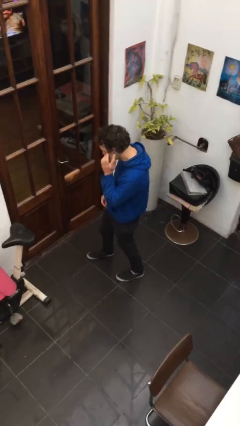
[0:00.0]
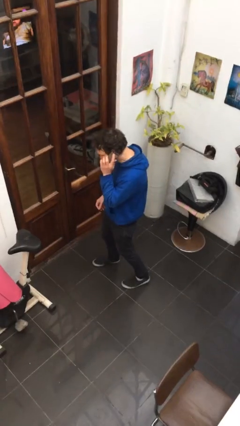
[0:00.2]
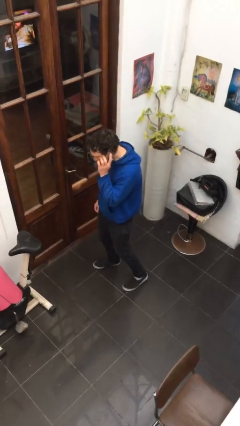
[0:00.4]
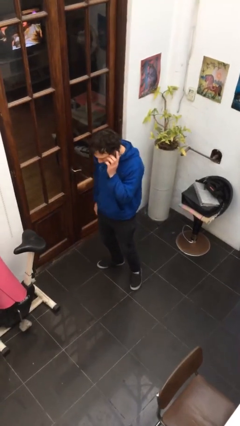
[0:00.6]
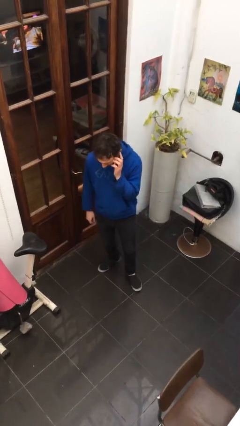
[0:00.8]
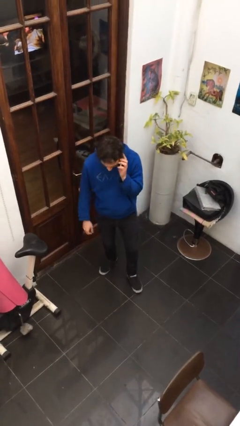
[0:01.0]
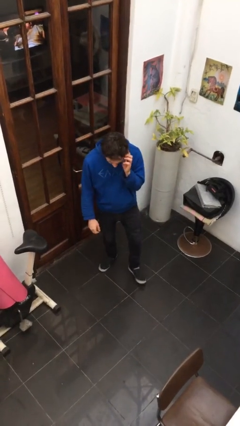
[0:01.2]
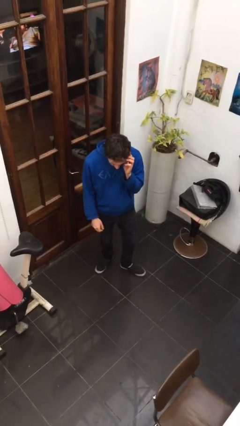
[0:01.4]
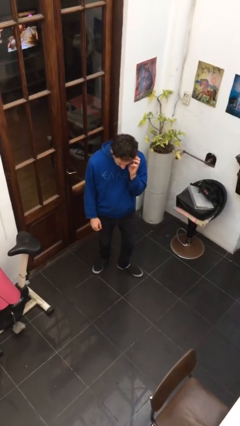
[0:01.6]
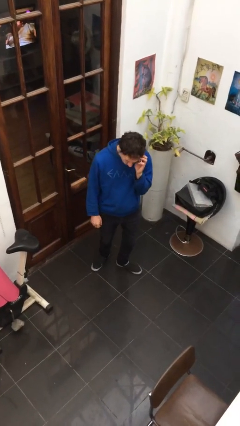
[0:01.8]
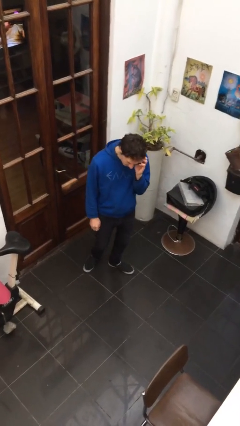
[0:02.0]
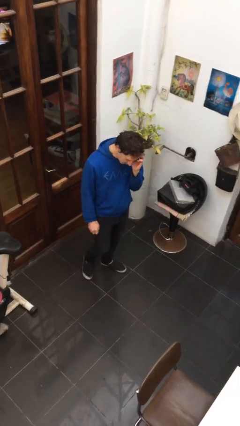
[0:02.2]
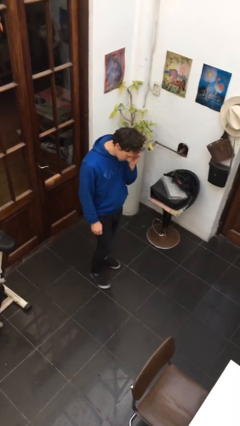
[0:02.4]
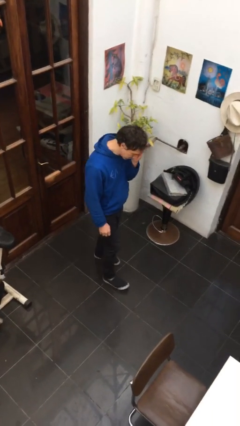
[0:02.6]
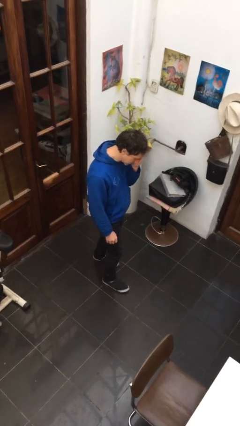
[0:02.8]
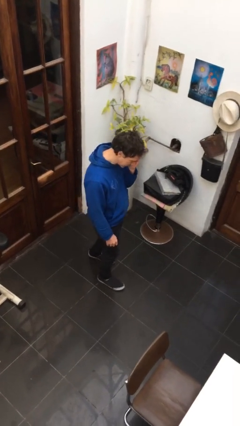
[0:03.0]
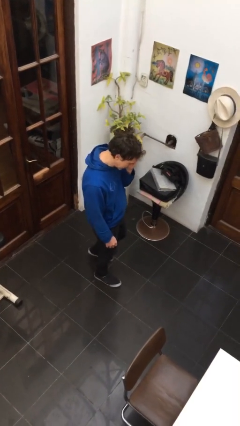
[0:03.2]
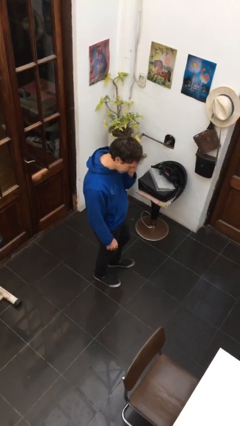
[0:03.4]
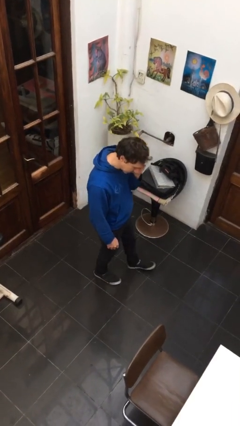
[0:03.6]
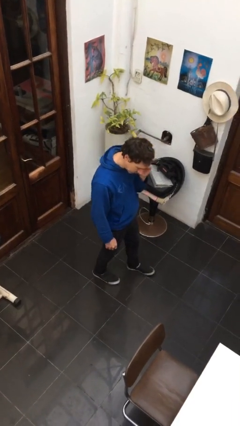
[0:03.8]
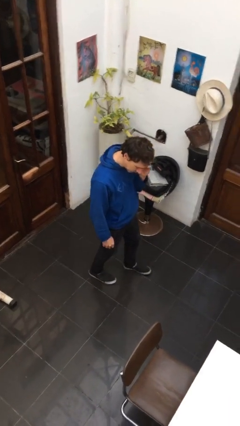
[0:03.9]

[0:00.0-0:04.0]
person talks on phone

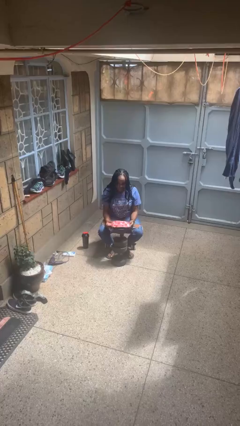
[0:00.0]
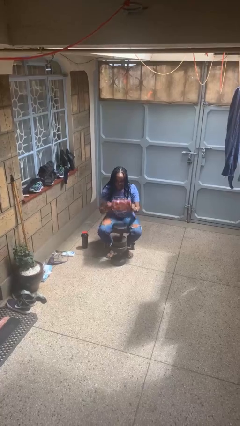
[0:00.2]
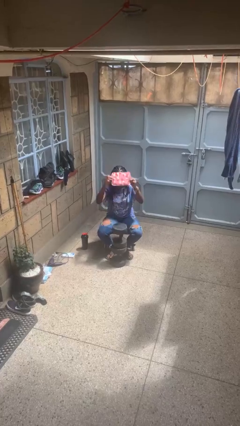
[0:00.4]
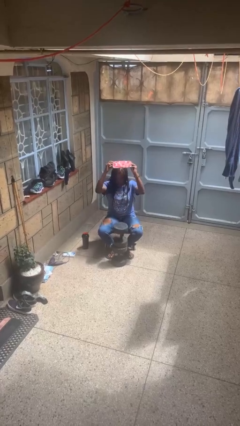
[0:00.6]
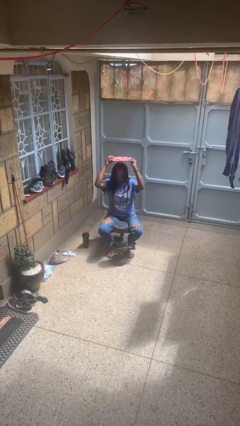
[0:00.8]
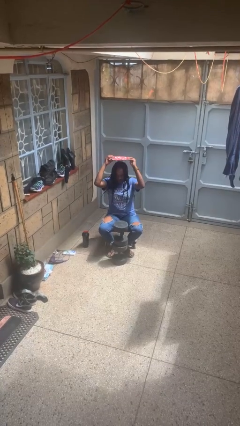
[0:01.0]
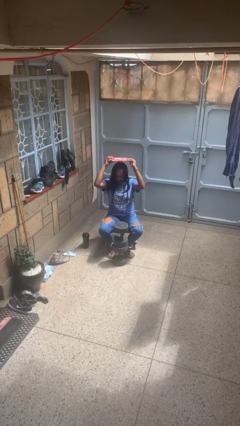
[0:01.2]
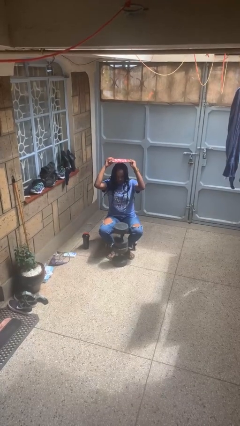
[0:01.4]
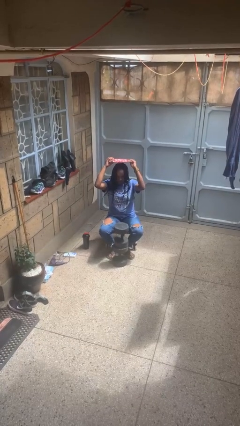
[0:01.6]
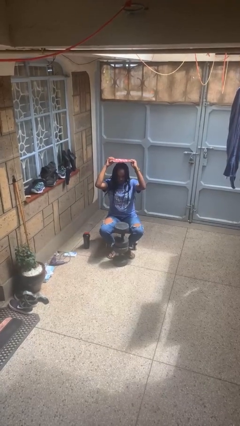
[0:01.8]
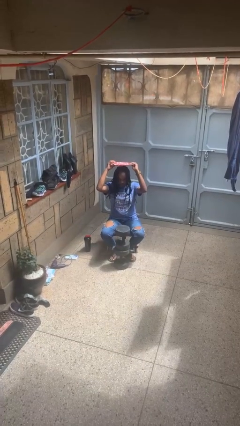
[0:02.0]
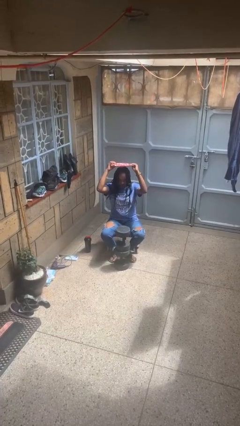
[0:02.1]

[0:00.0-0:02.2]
person holds object above head

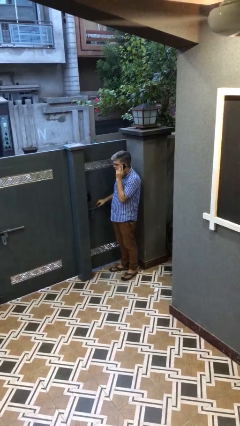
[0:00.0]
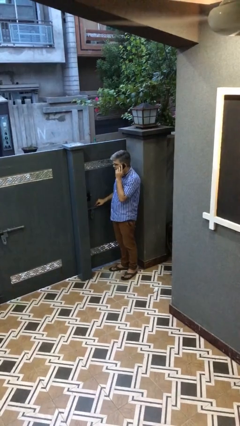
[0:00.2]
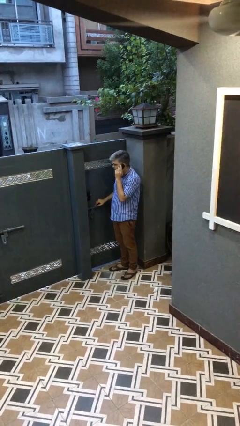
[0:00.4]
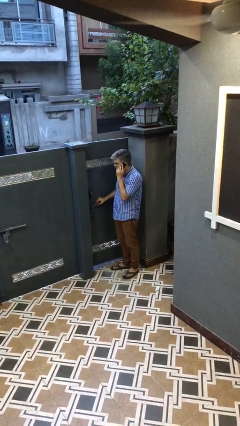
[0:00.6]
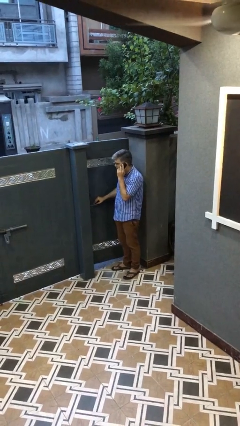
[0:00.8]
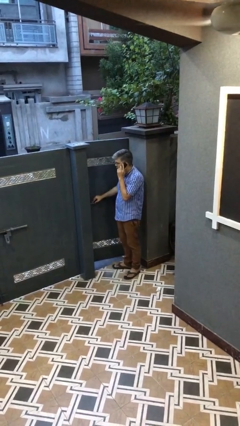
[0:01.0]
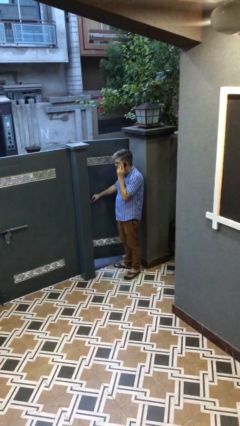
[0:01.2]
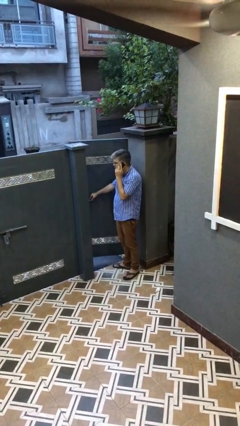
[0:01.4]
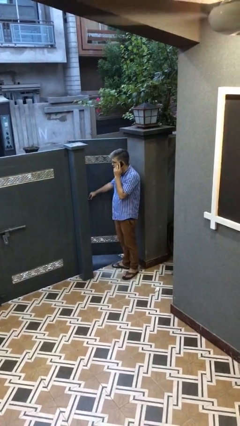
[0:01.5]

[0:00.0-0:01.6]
person opens facility door

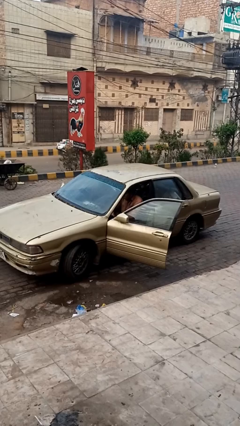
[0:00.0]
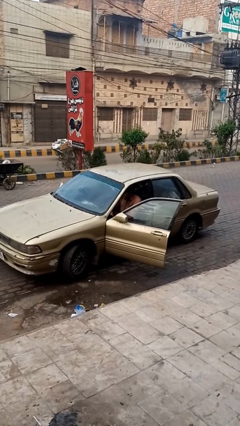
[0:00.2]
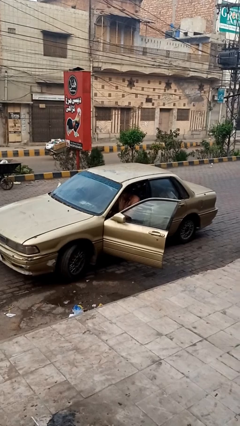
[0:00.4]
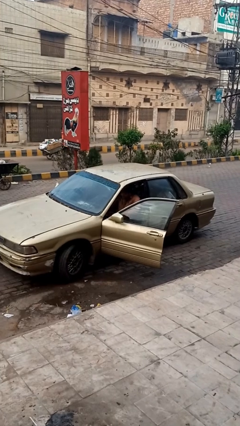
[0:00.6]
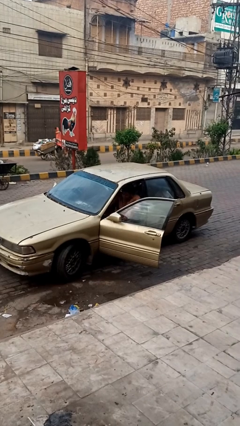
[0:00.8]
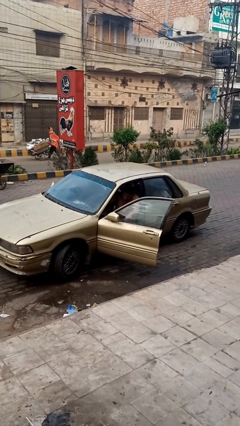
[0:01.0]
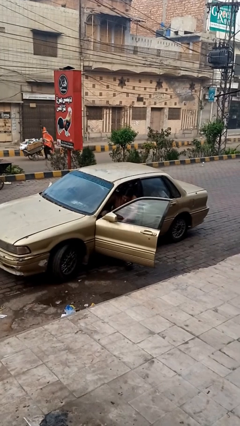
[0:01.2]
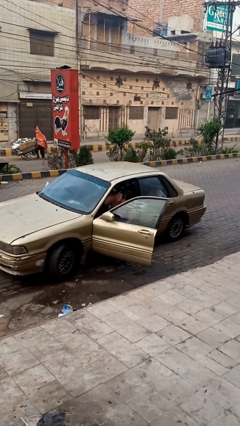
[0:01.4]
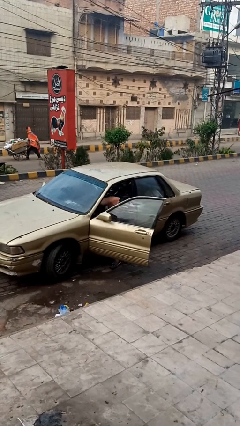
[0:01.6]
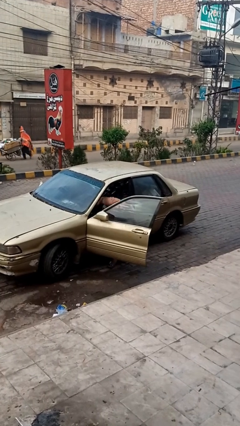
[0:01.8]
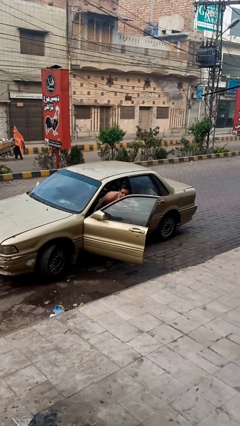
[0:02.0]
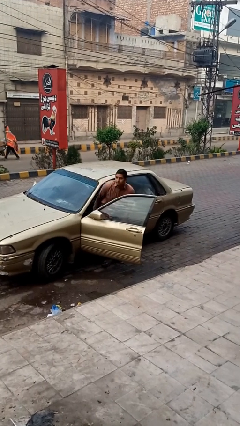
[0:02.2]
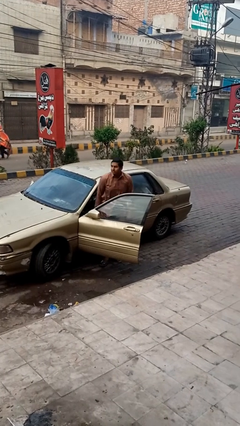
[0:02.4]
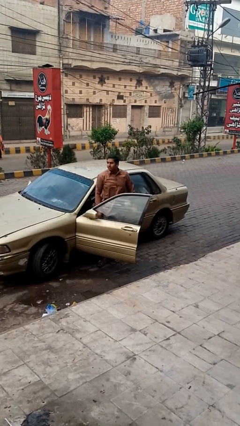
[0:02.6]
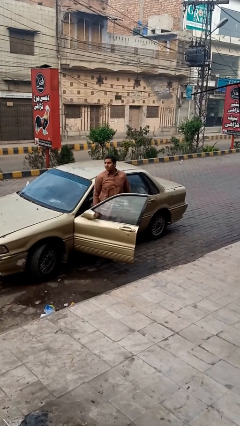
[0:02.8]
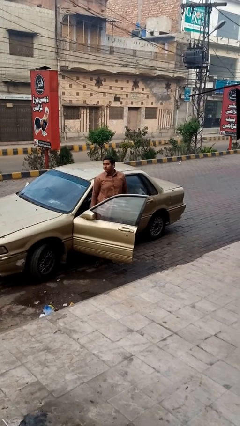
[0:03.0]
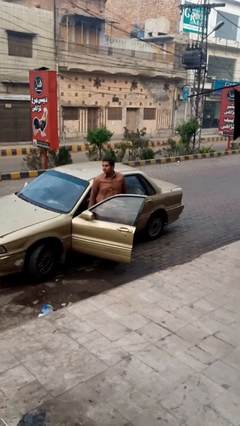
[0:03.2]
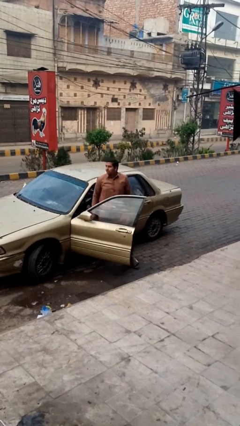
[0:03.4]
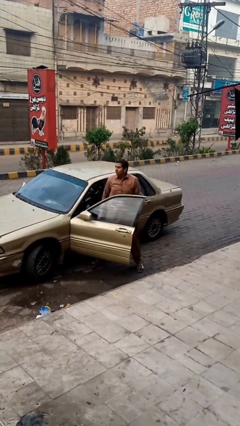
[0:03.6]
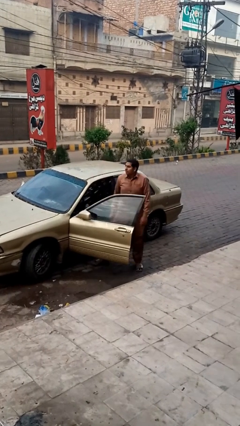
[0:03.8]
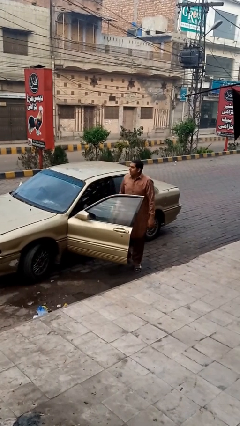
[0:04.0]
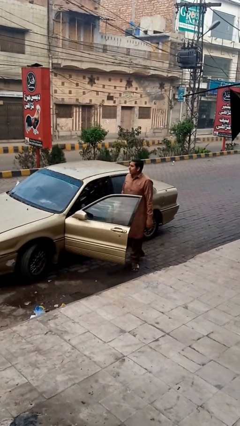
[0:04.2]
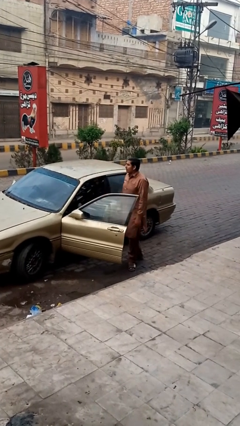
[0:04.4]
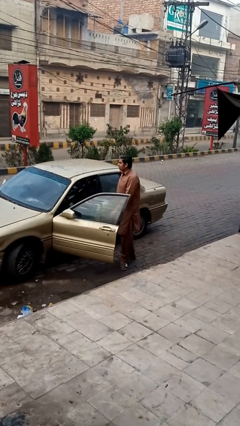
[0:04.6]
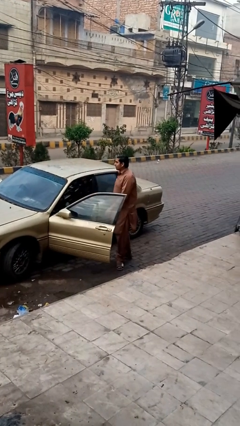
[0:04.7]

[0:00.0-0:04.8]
person exits car

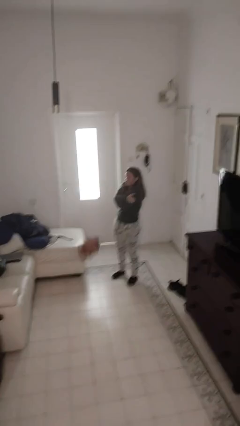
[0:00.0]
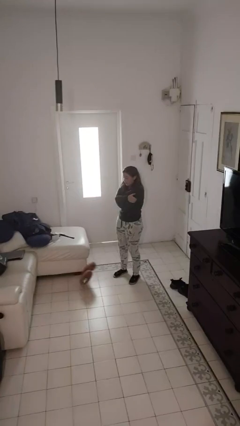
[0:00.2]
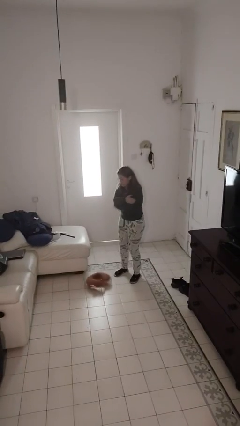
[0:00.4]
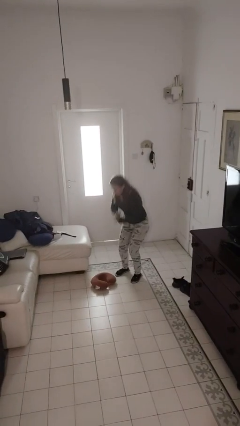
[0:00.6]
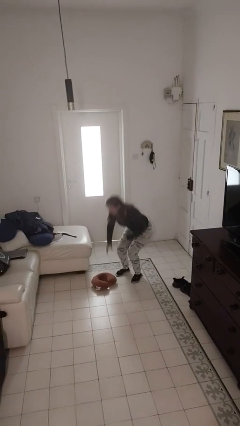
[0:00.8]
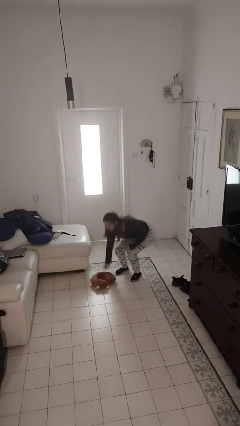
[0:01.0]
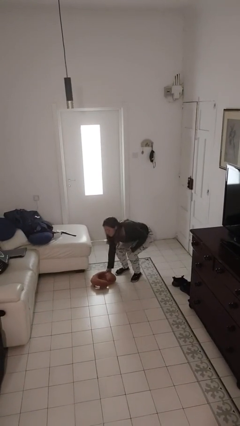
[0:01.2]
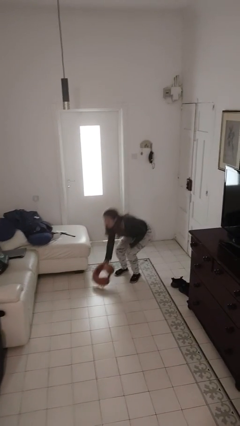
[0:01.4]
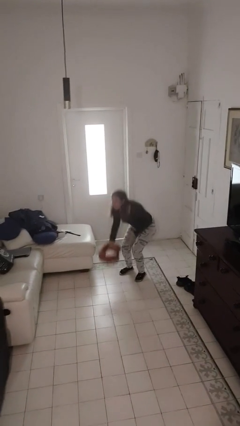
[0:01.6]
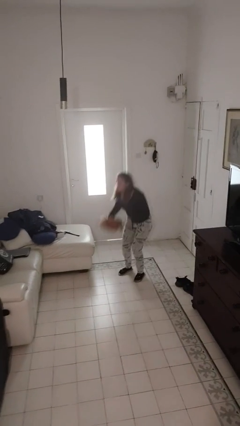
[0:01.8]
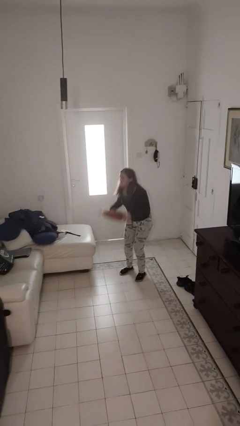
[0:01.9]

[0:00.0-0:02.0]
person picks up object from floor

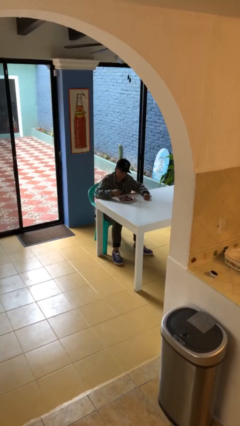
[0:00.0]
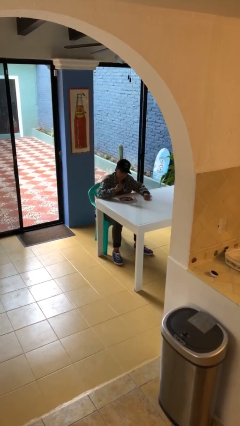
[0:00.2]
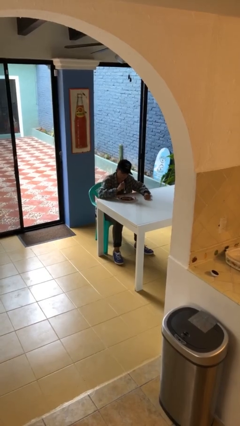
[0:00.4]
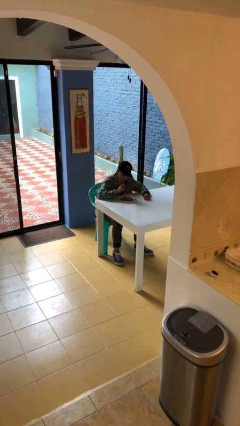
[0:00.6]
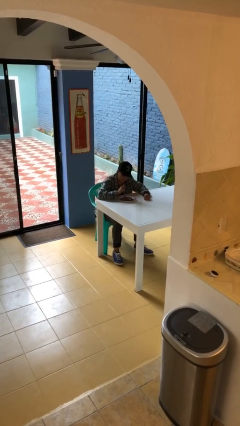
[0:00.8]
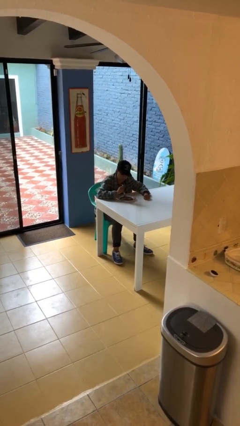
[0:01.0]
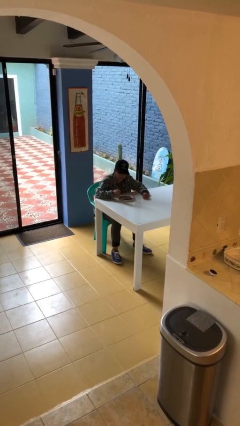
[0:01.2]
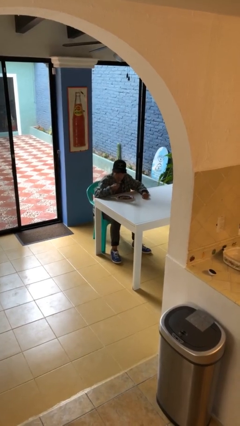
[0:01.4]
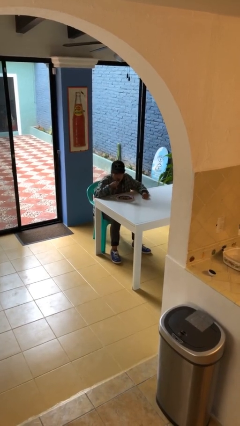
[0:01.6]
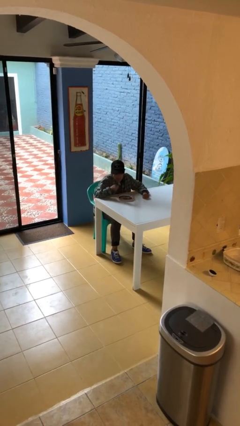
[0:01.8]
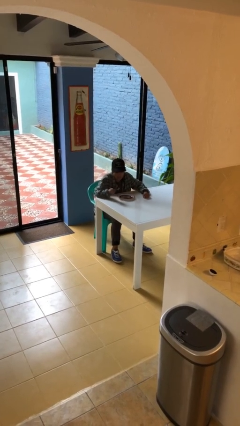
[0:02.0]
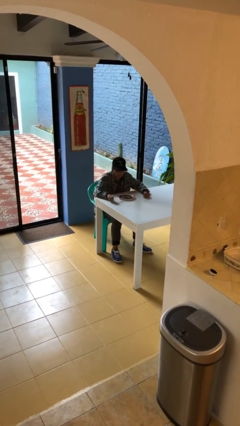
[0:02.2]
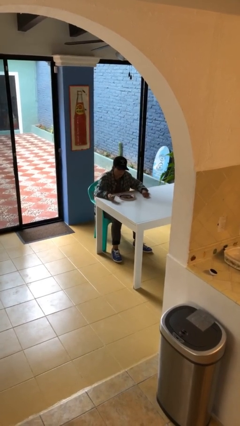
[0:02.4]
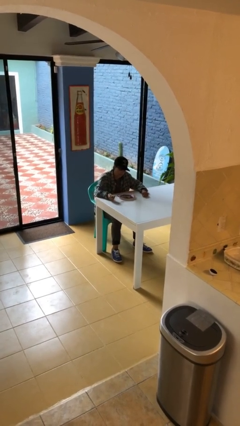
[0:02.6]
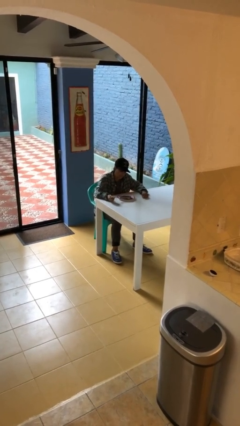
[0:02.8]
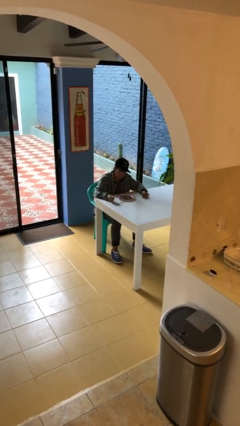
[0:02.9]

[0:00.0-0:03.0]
person eats with utensil

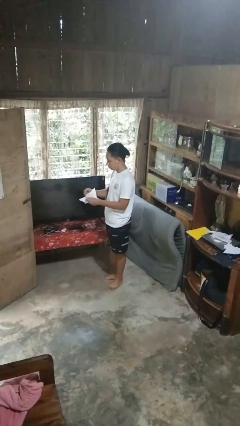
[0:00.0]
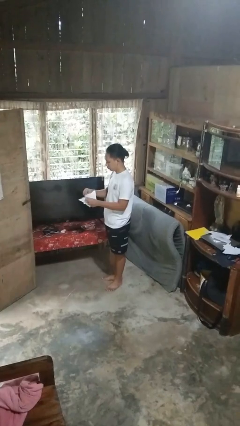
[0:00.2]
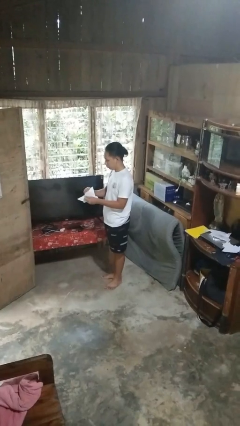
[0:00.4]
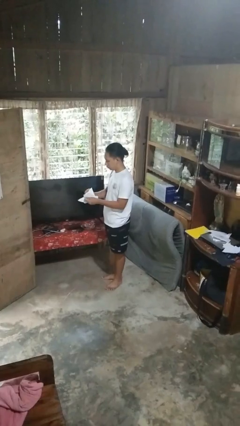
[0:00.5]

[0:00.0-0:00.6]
person tears paper
